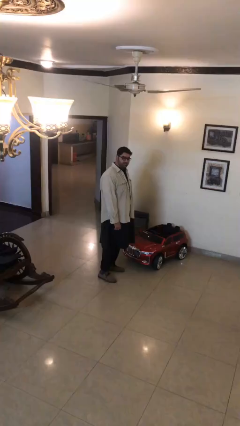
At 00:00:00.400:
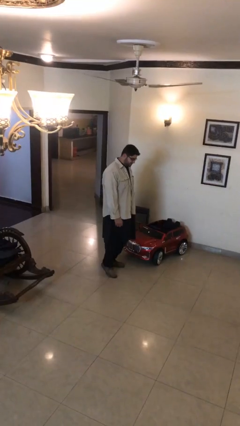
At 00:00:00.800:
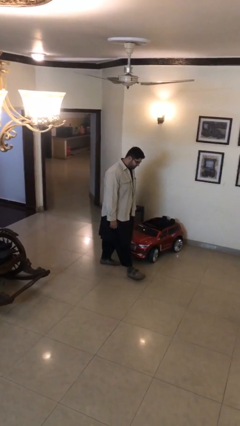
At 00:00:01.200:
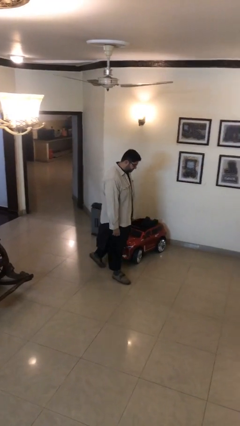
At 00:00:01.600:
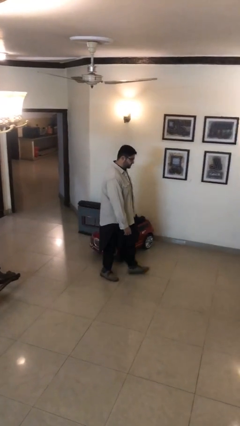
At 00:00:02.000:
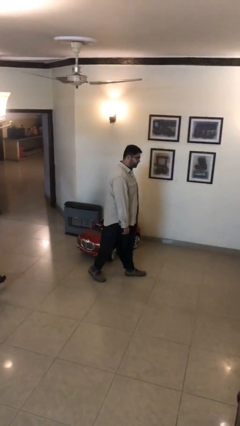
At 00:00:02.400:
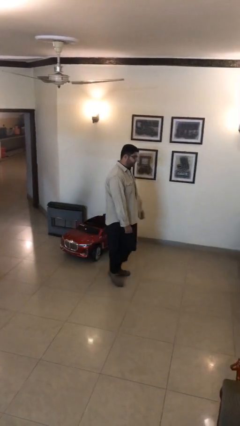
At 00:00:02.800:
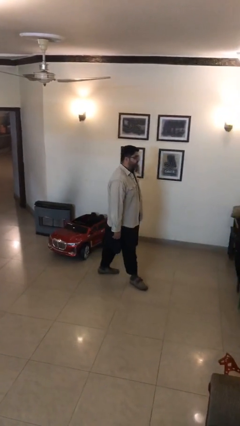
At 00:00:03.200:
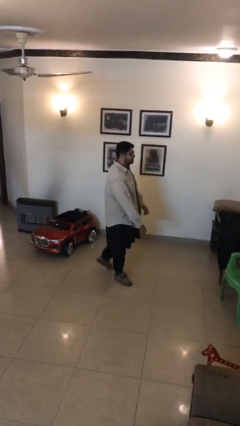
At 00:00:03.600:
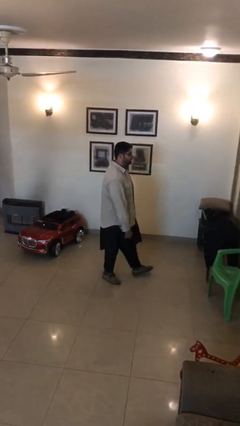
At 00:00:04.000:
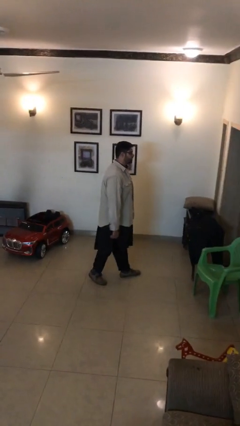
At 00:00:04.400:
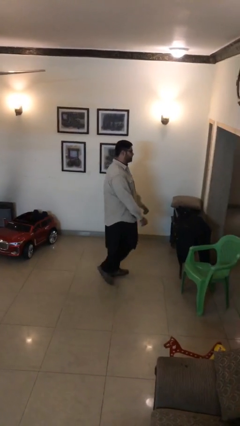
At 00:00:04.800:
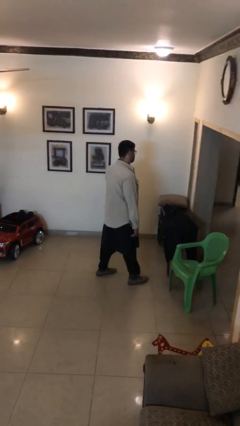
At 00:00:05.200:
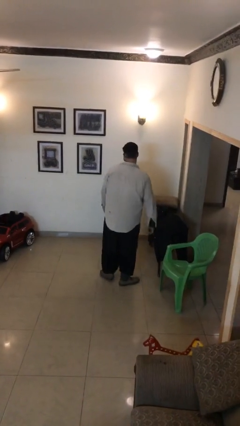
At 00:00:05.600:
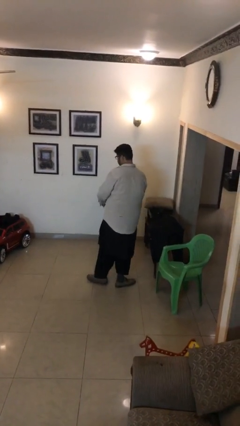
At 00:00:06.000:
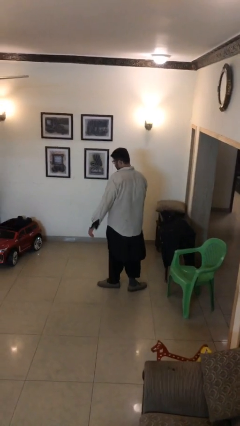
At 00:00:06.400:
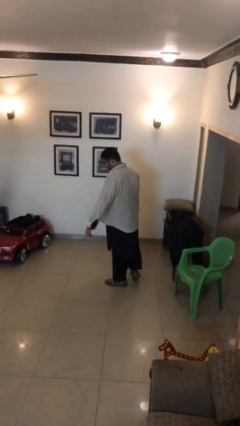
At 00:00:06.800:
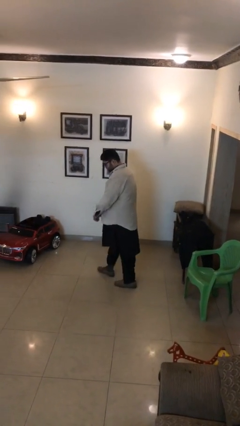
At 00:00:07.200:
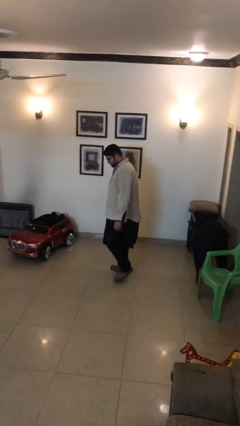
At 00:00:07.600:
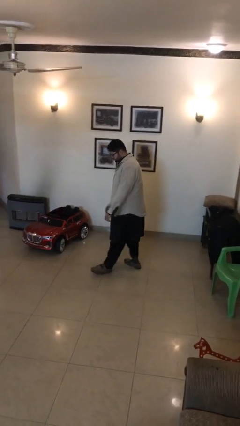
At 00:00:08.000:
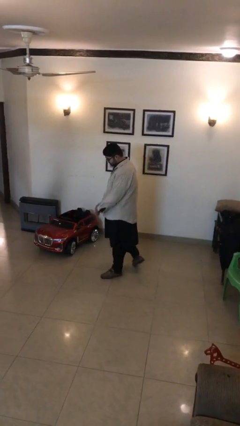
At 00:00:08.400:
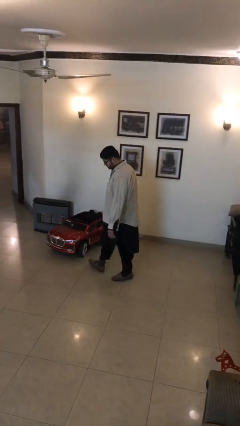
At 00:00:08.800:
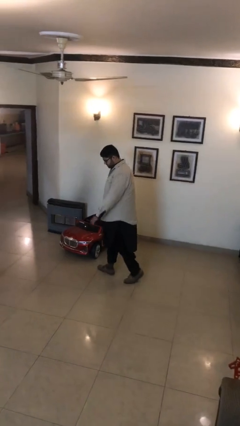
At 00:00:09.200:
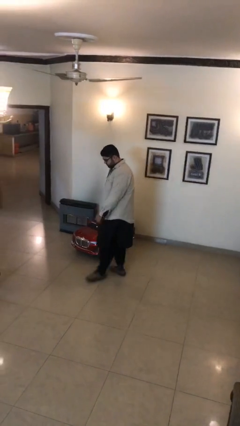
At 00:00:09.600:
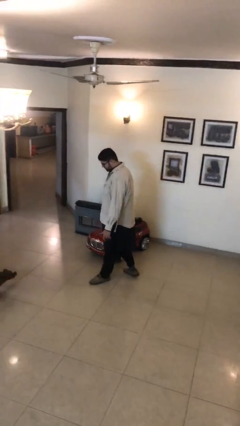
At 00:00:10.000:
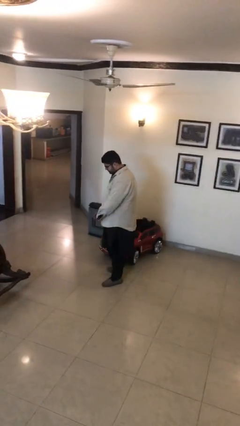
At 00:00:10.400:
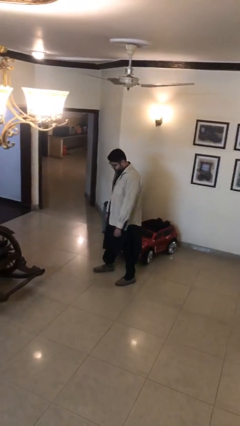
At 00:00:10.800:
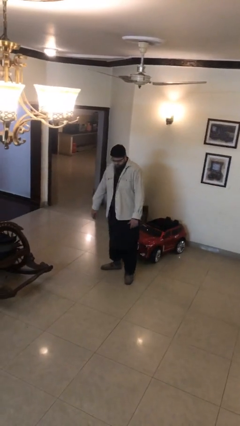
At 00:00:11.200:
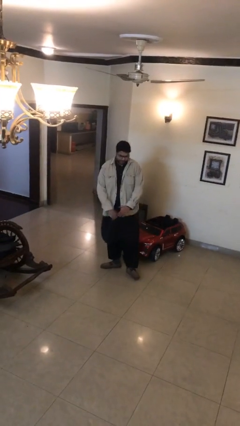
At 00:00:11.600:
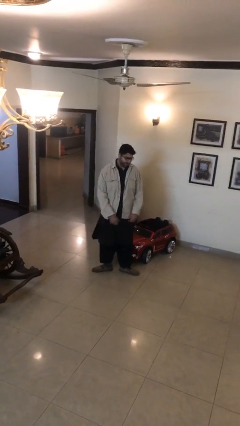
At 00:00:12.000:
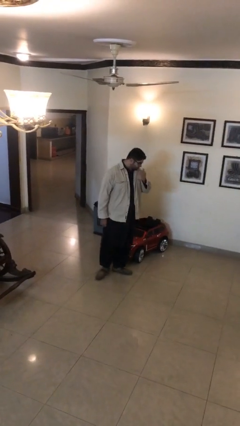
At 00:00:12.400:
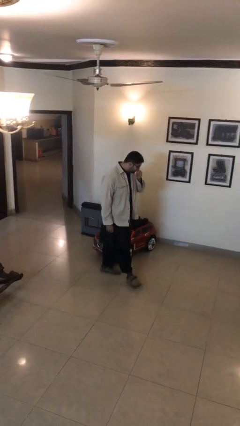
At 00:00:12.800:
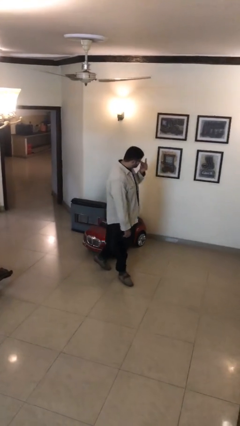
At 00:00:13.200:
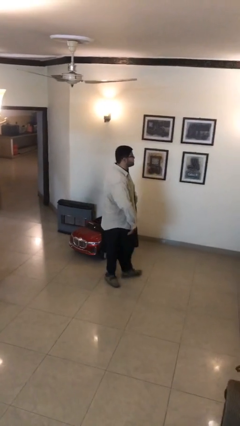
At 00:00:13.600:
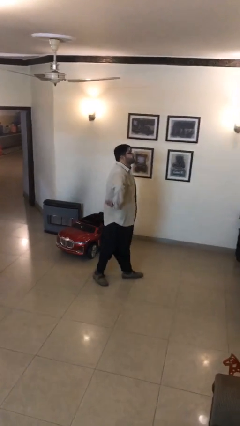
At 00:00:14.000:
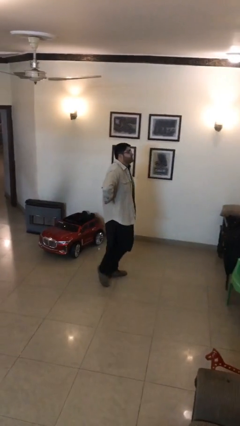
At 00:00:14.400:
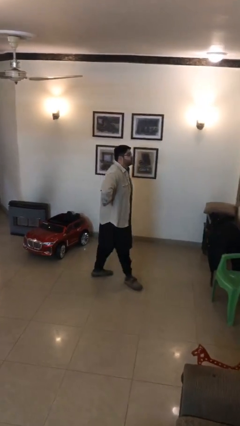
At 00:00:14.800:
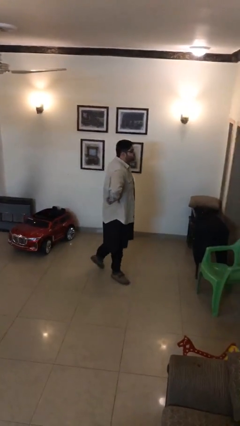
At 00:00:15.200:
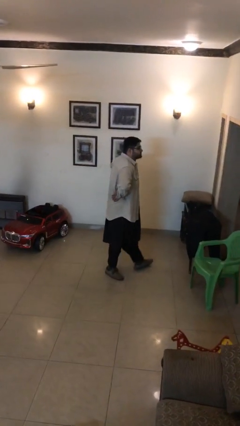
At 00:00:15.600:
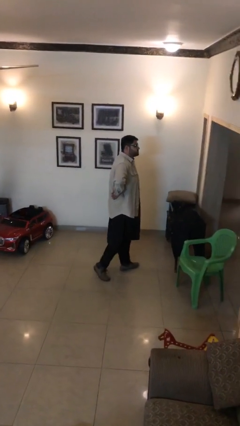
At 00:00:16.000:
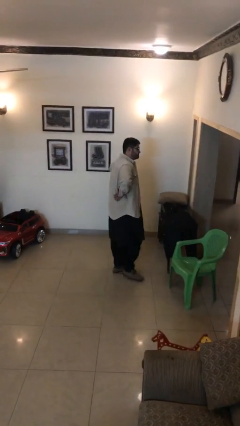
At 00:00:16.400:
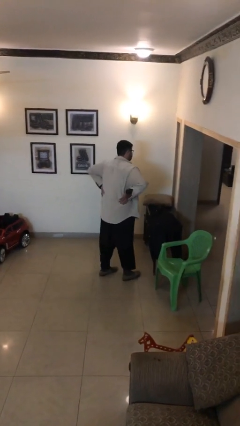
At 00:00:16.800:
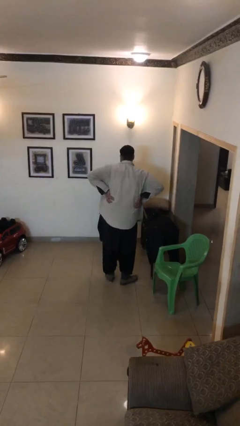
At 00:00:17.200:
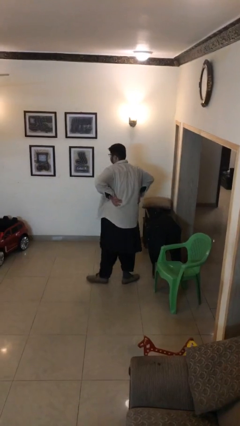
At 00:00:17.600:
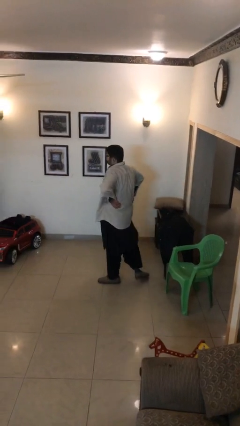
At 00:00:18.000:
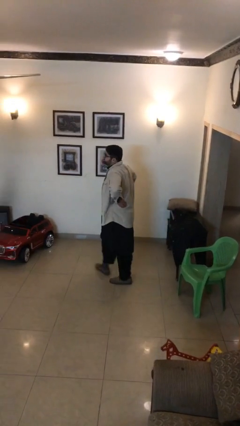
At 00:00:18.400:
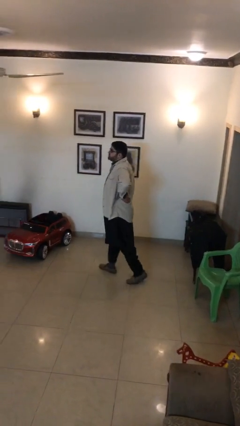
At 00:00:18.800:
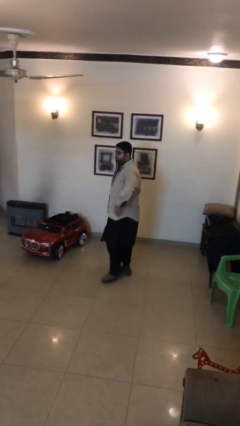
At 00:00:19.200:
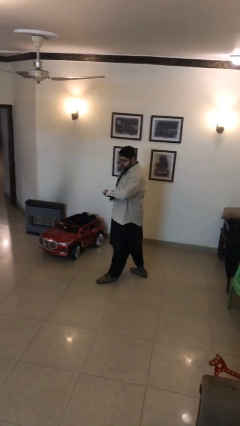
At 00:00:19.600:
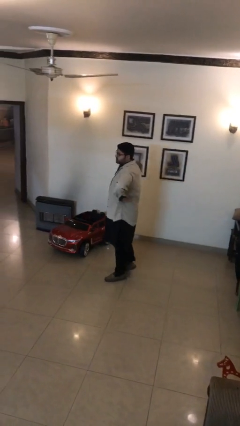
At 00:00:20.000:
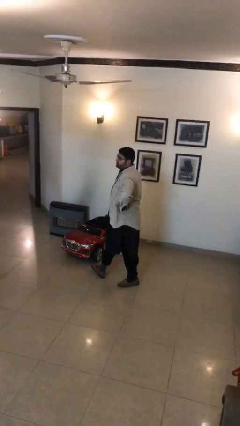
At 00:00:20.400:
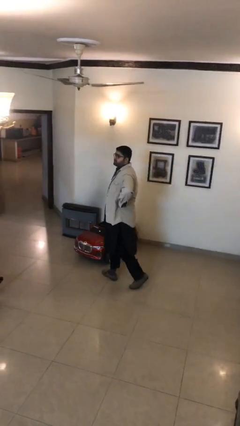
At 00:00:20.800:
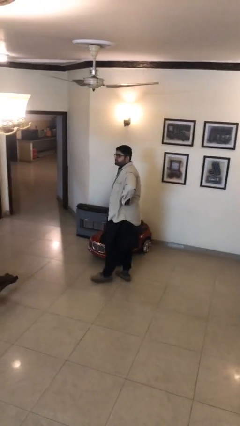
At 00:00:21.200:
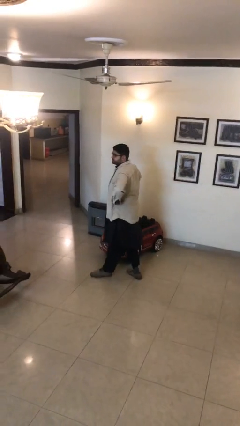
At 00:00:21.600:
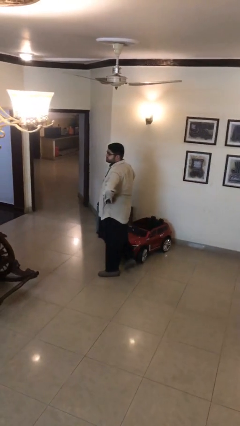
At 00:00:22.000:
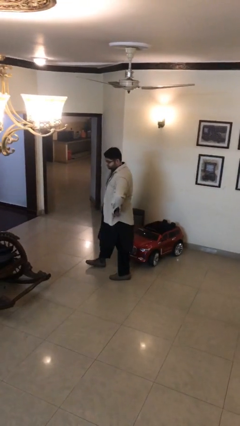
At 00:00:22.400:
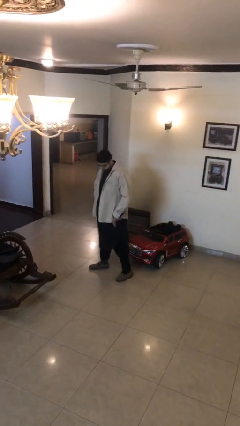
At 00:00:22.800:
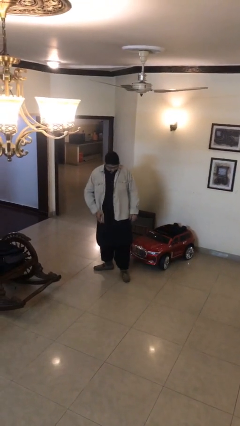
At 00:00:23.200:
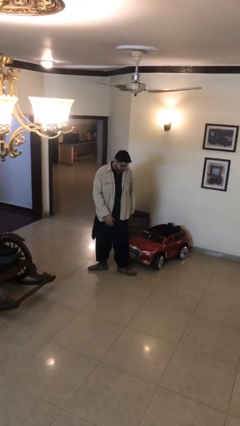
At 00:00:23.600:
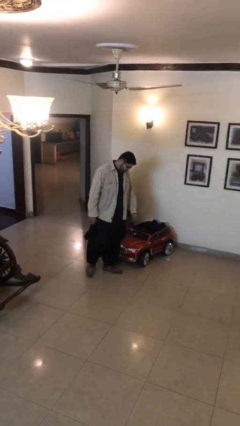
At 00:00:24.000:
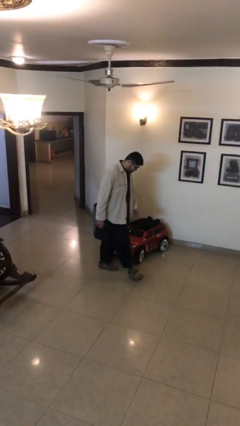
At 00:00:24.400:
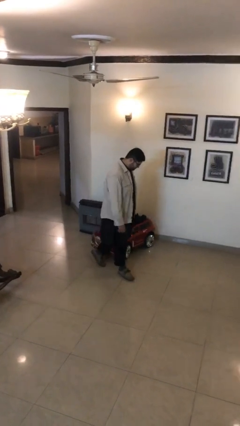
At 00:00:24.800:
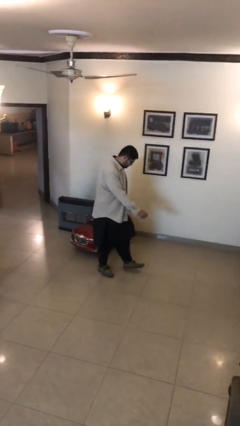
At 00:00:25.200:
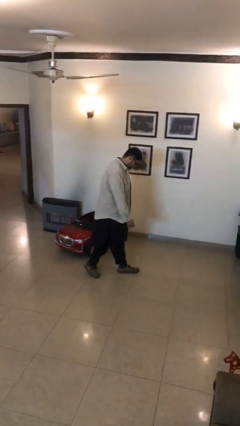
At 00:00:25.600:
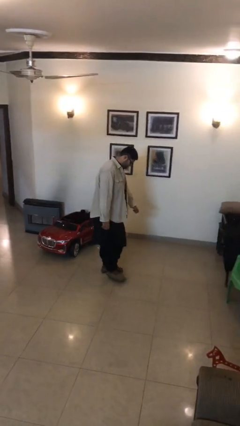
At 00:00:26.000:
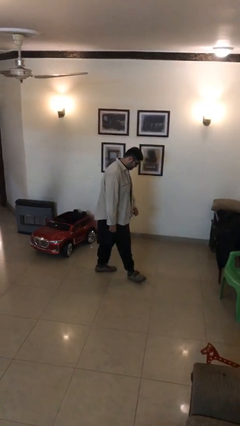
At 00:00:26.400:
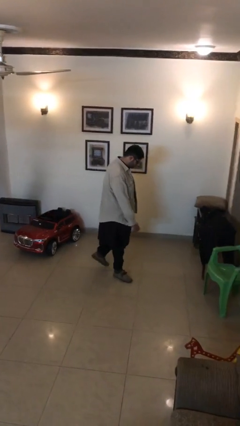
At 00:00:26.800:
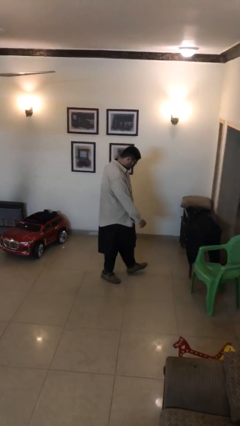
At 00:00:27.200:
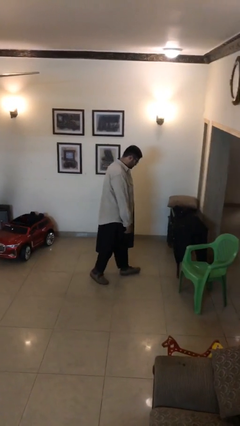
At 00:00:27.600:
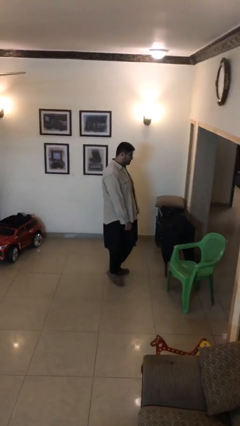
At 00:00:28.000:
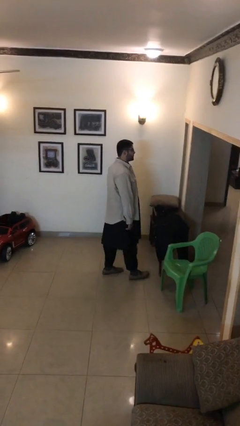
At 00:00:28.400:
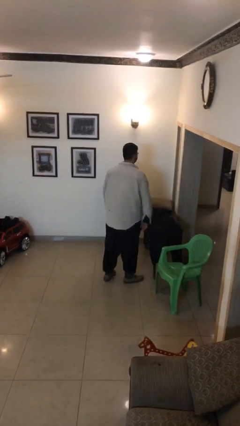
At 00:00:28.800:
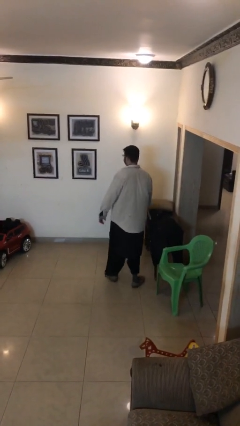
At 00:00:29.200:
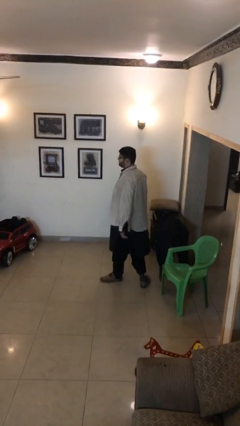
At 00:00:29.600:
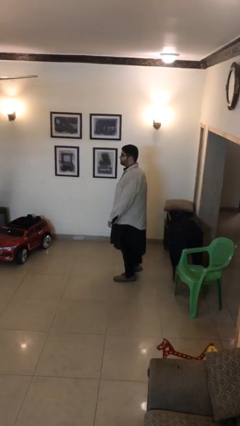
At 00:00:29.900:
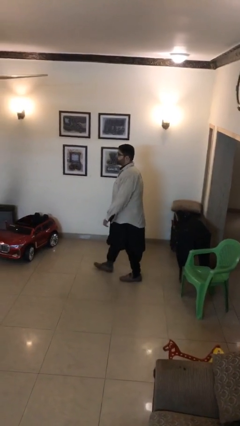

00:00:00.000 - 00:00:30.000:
person walks

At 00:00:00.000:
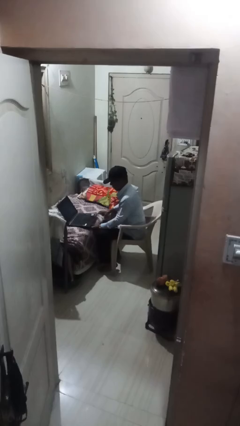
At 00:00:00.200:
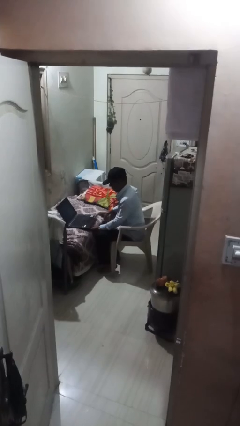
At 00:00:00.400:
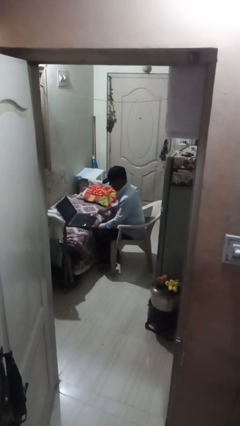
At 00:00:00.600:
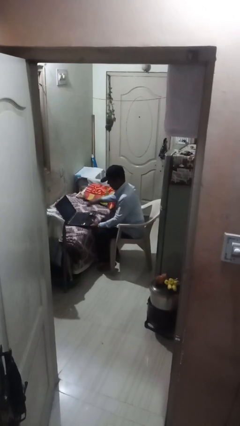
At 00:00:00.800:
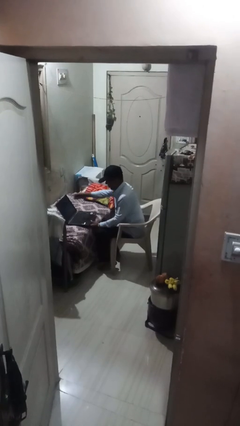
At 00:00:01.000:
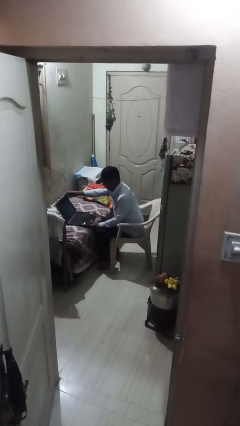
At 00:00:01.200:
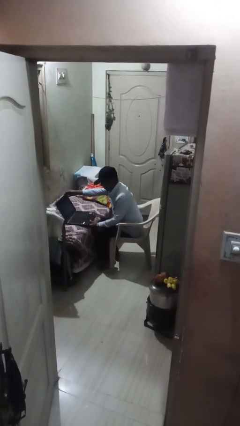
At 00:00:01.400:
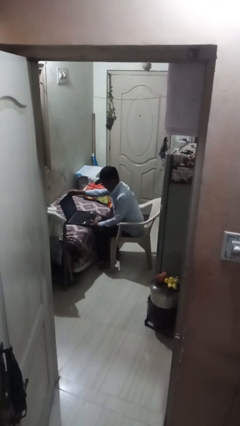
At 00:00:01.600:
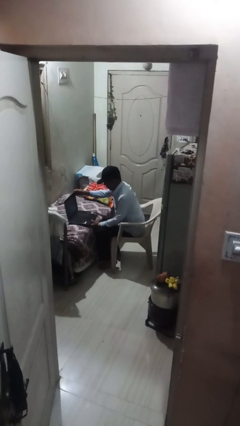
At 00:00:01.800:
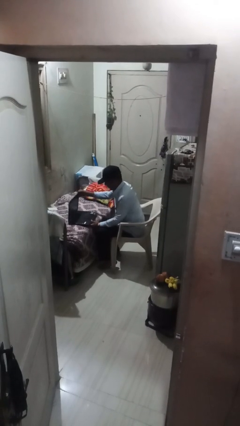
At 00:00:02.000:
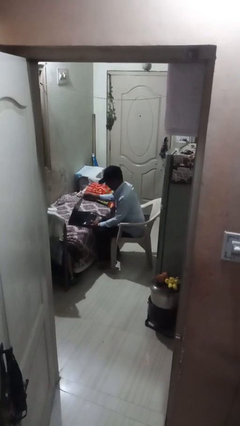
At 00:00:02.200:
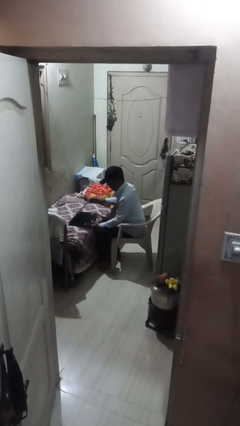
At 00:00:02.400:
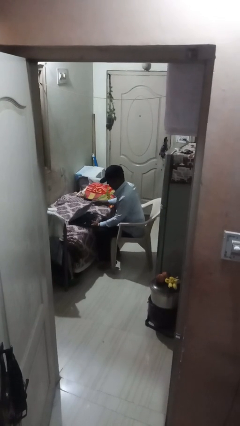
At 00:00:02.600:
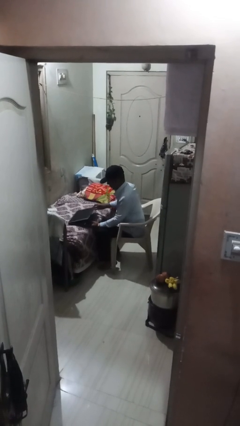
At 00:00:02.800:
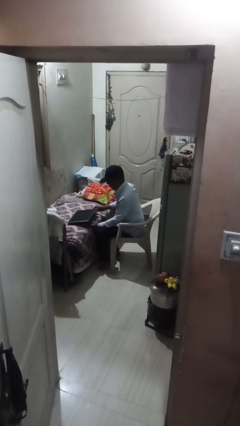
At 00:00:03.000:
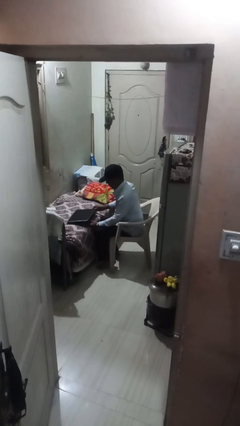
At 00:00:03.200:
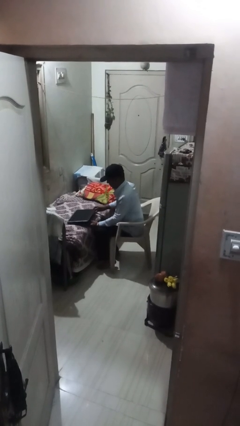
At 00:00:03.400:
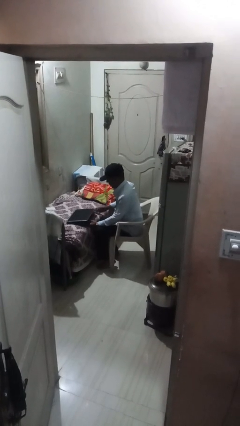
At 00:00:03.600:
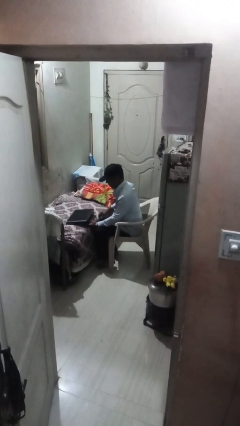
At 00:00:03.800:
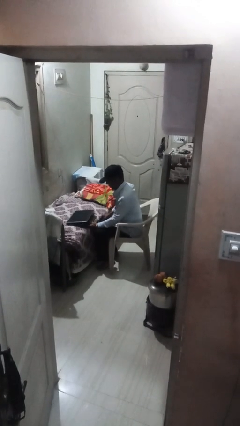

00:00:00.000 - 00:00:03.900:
person closes laptop
